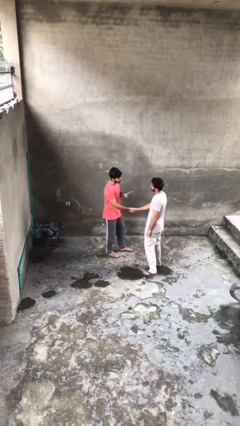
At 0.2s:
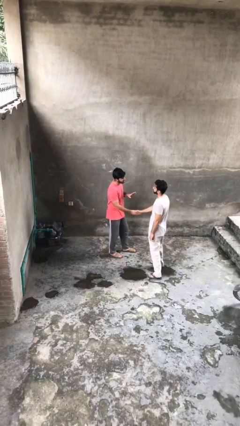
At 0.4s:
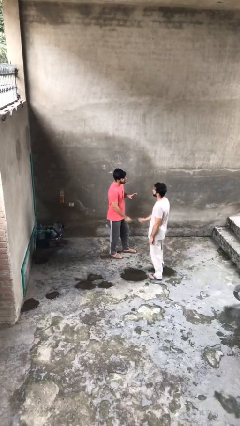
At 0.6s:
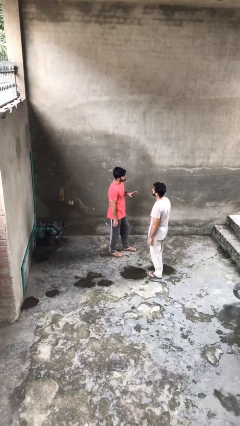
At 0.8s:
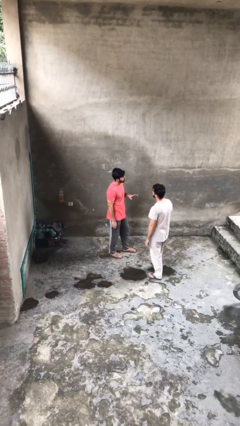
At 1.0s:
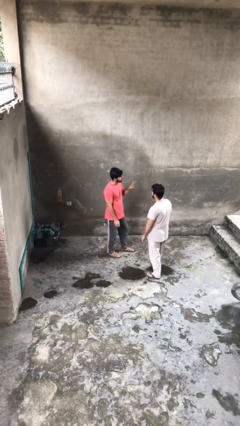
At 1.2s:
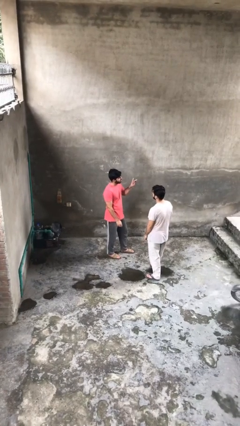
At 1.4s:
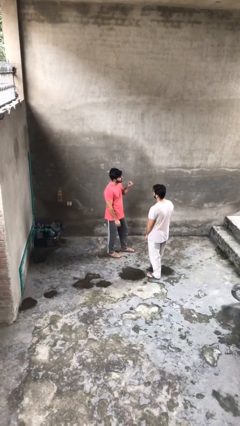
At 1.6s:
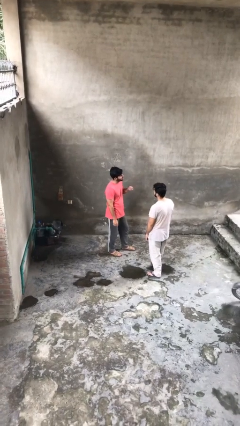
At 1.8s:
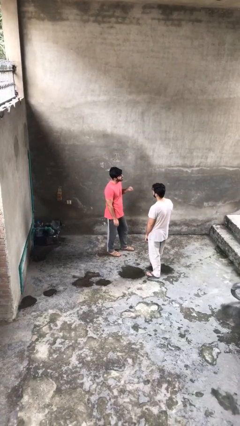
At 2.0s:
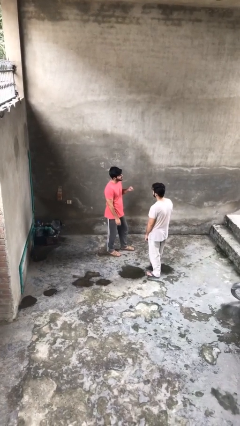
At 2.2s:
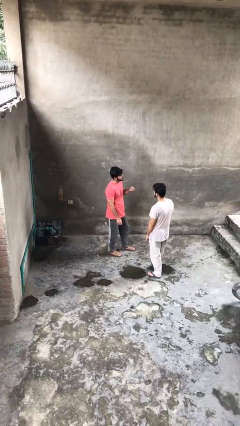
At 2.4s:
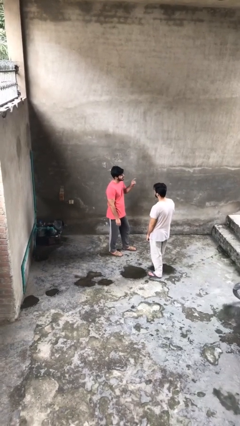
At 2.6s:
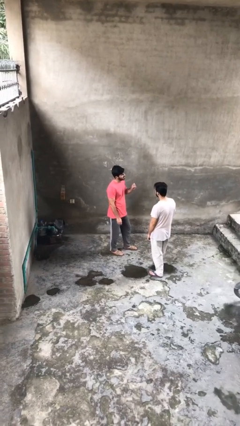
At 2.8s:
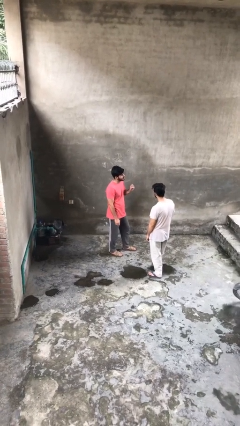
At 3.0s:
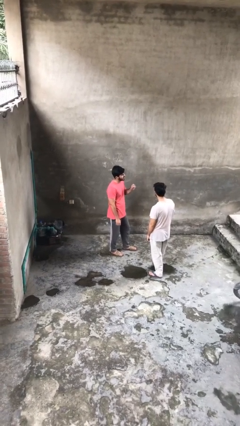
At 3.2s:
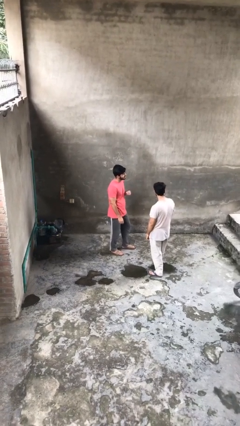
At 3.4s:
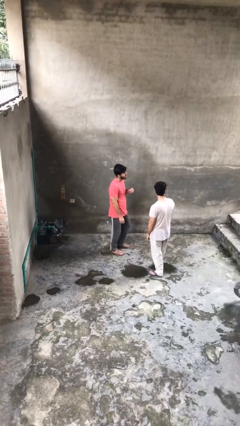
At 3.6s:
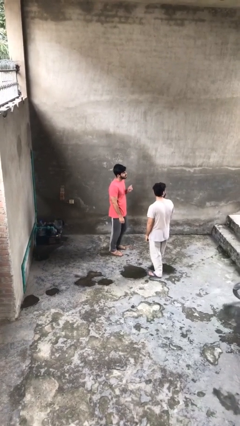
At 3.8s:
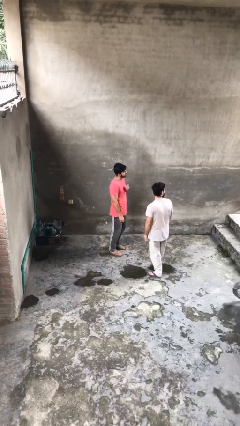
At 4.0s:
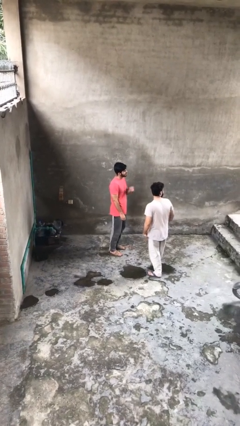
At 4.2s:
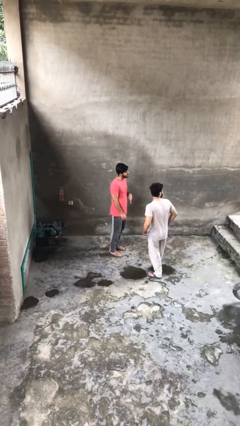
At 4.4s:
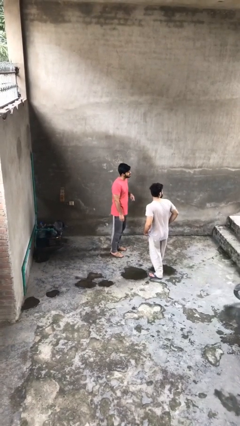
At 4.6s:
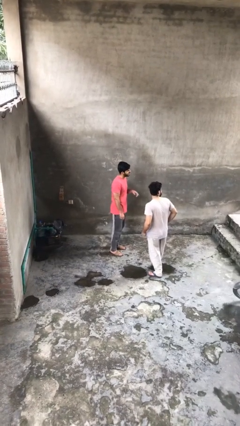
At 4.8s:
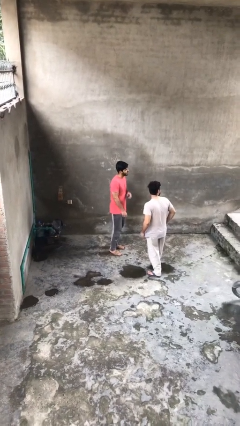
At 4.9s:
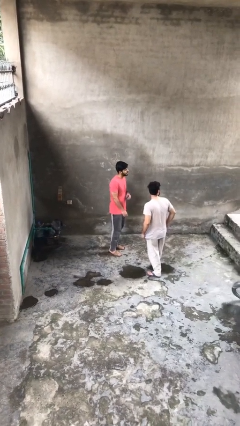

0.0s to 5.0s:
person talks to person

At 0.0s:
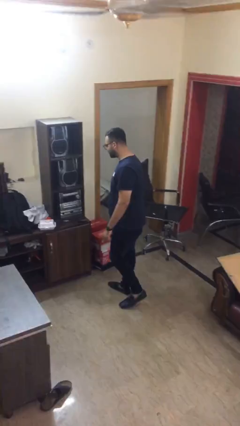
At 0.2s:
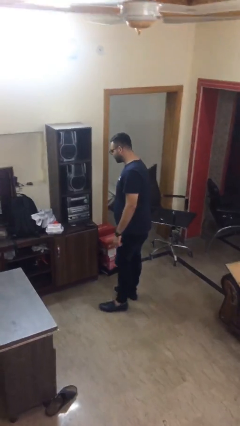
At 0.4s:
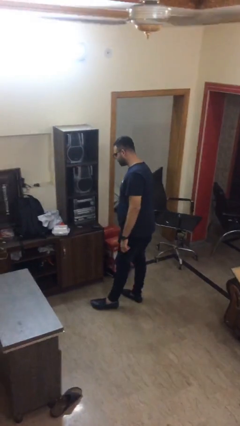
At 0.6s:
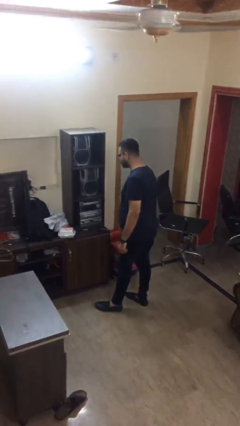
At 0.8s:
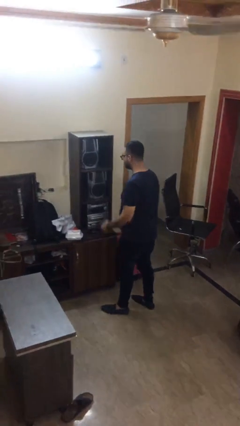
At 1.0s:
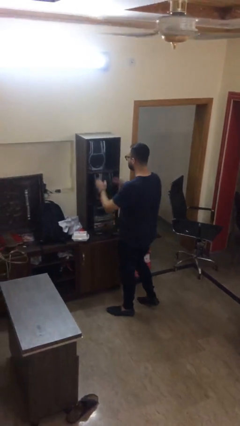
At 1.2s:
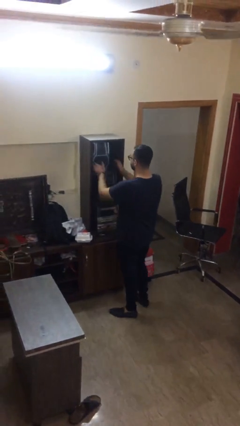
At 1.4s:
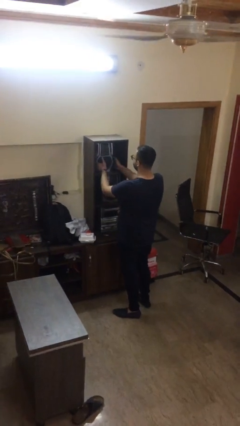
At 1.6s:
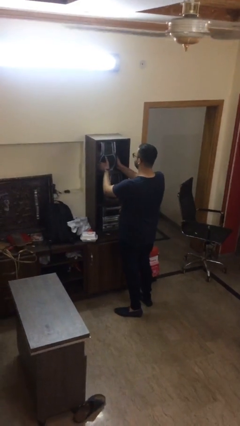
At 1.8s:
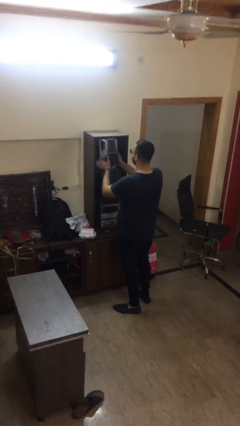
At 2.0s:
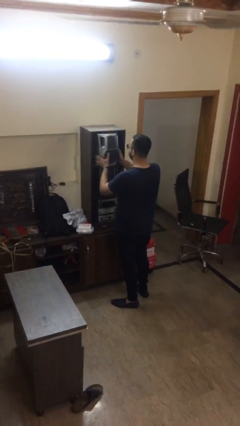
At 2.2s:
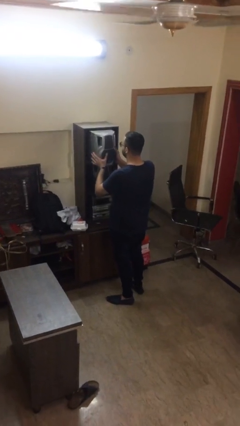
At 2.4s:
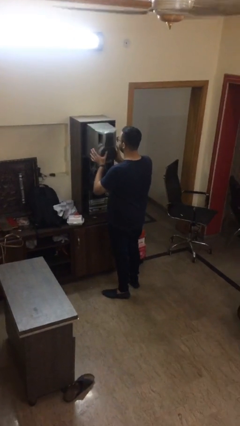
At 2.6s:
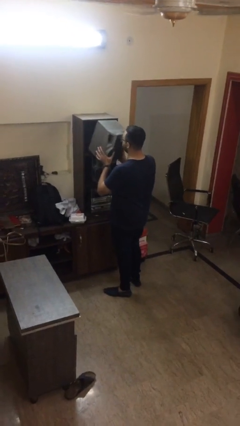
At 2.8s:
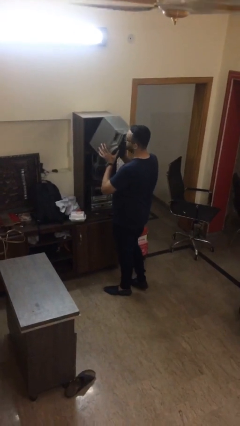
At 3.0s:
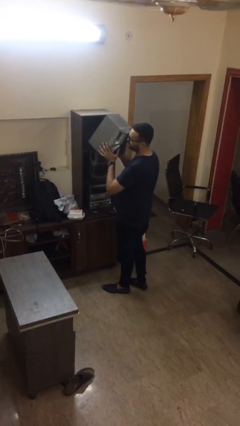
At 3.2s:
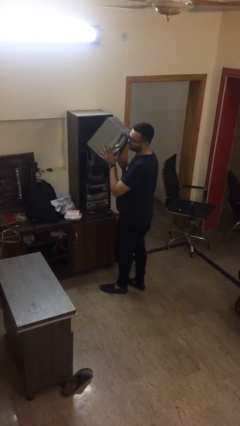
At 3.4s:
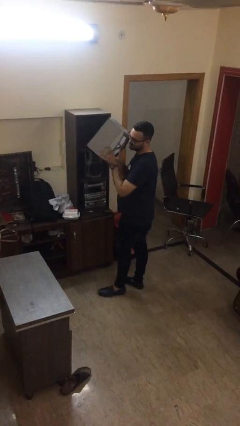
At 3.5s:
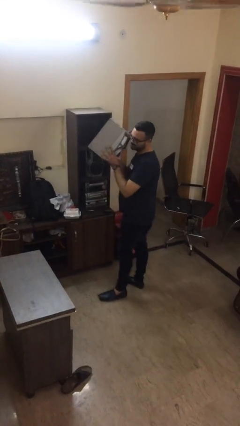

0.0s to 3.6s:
person picks up object from shelf

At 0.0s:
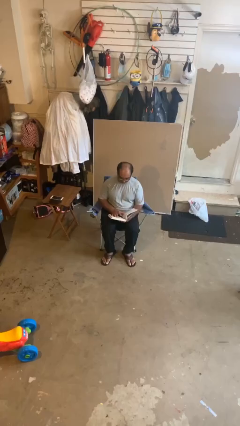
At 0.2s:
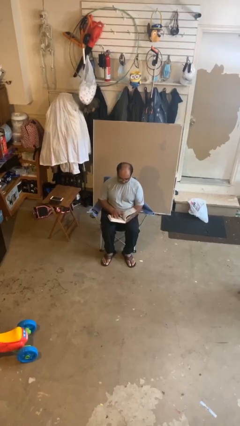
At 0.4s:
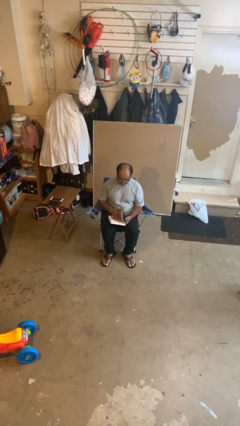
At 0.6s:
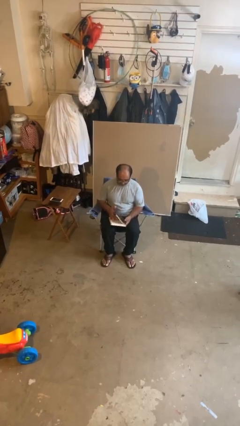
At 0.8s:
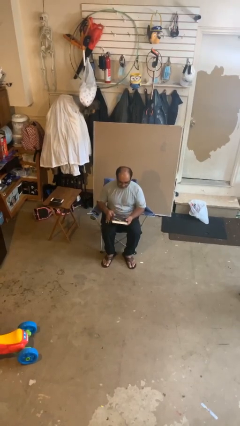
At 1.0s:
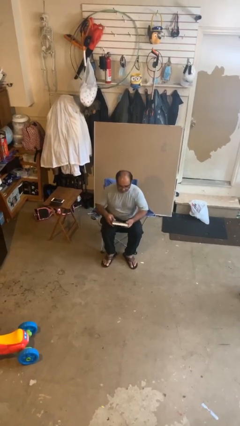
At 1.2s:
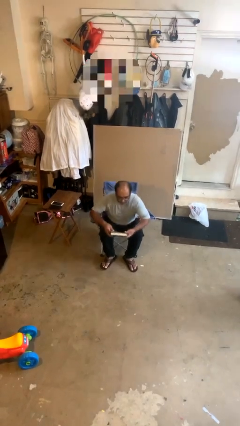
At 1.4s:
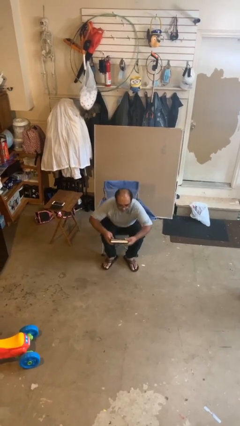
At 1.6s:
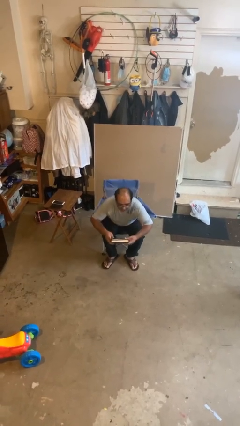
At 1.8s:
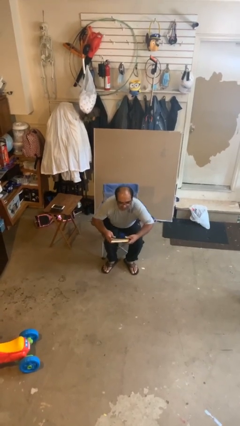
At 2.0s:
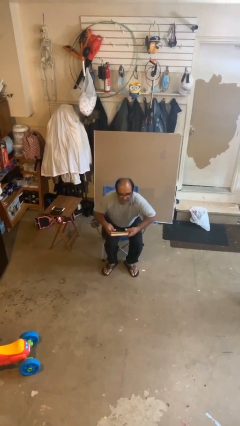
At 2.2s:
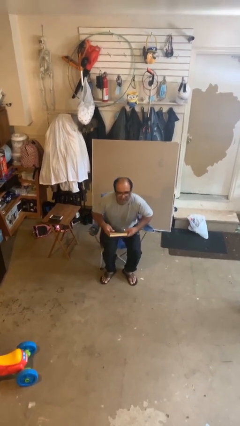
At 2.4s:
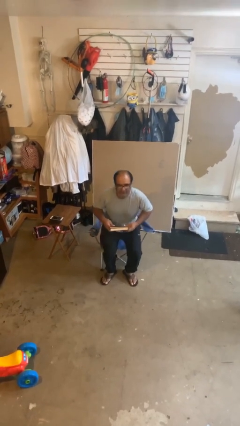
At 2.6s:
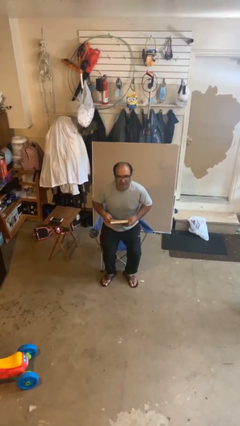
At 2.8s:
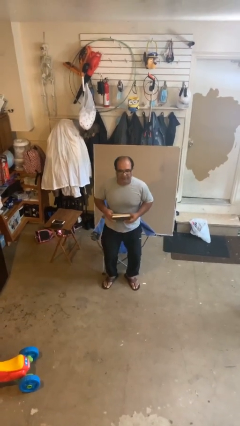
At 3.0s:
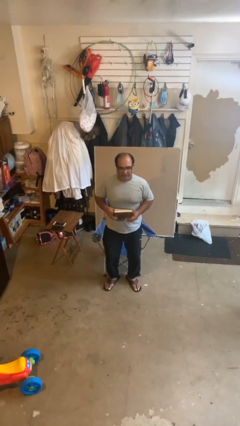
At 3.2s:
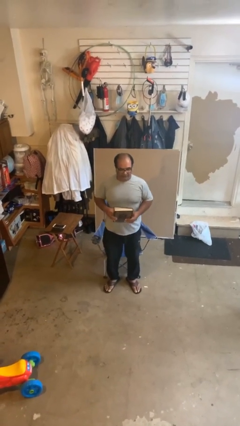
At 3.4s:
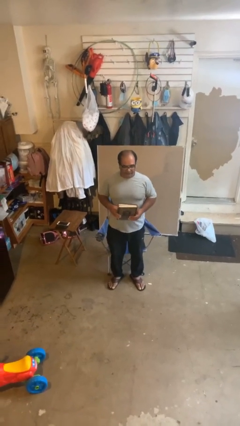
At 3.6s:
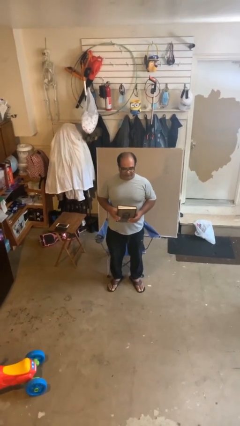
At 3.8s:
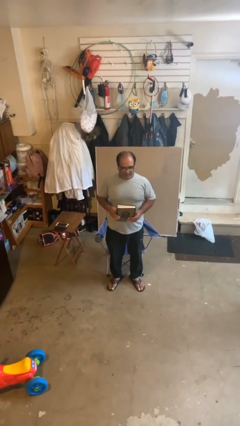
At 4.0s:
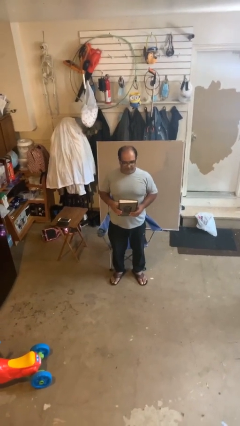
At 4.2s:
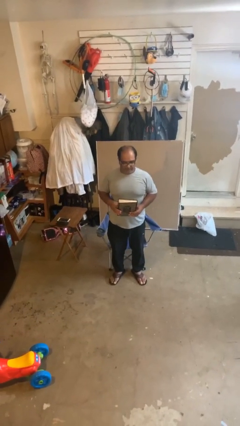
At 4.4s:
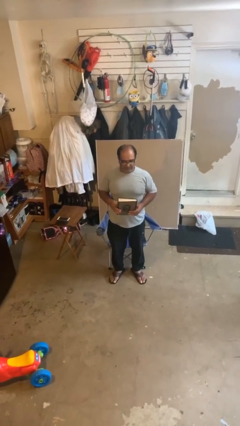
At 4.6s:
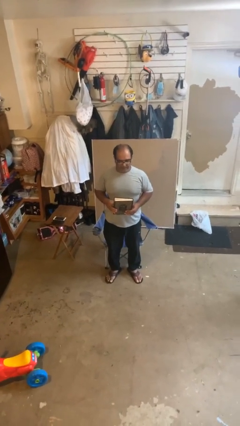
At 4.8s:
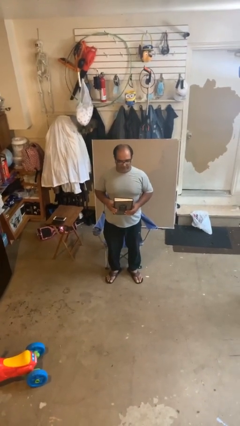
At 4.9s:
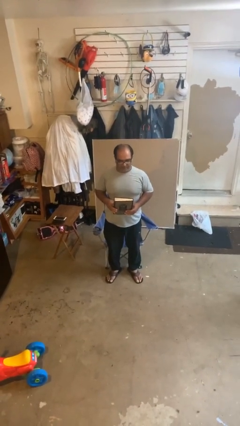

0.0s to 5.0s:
person stands up

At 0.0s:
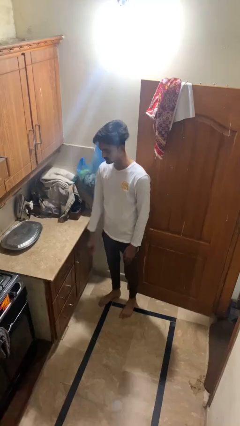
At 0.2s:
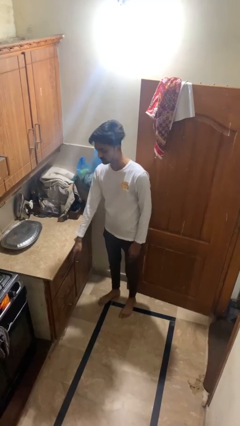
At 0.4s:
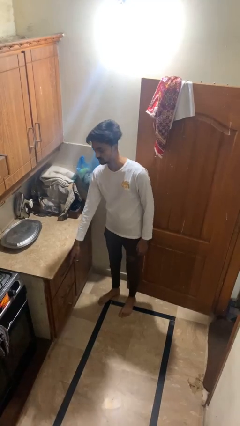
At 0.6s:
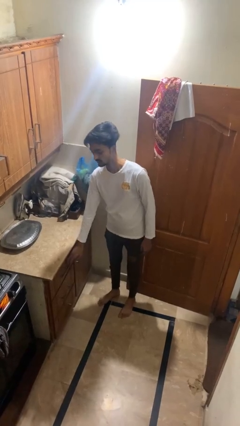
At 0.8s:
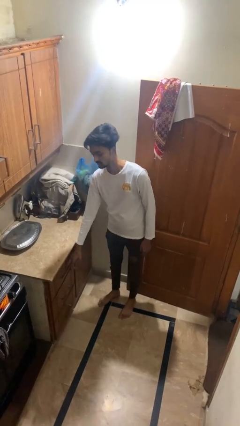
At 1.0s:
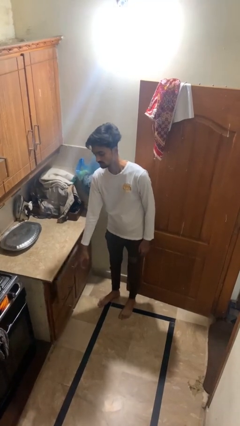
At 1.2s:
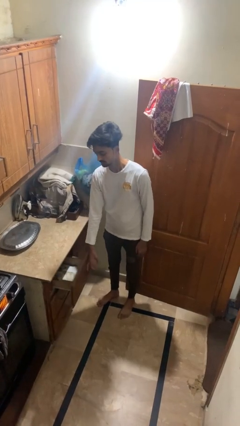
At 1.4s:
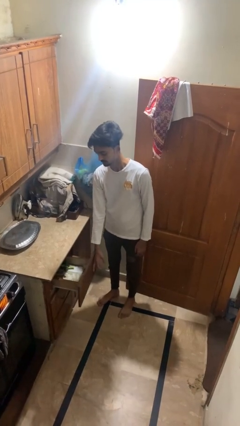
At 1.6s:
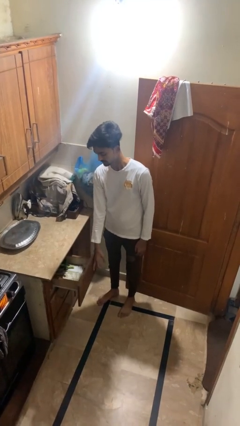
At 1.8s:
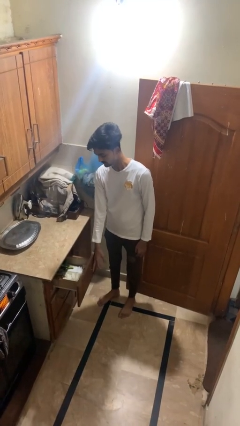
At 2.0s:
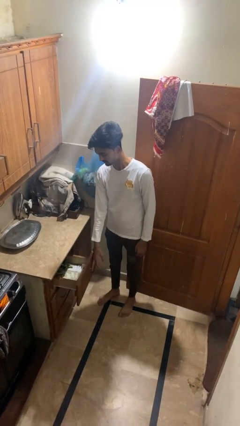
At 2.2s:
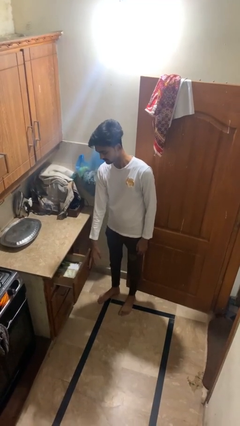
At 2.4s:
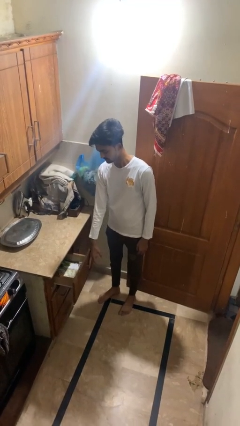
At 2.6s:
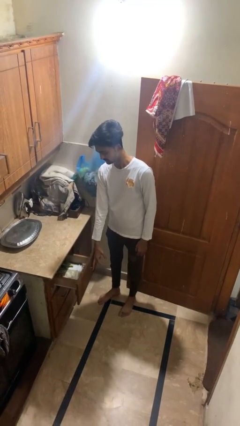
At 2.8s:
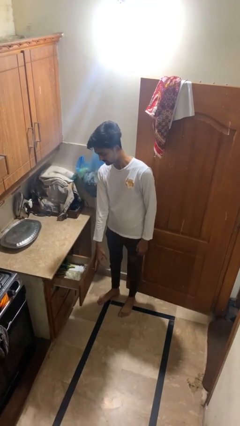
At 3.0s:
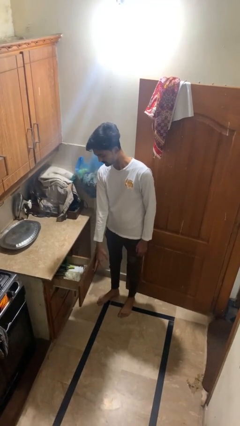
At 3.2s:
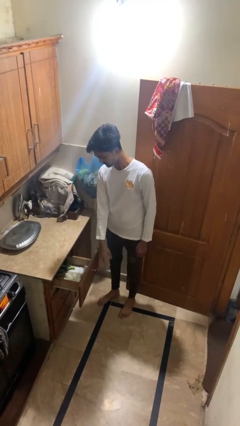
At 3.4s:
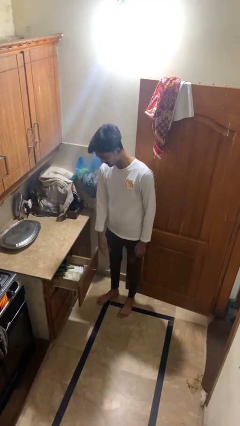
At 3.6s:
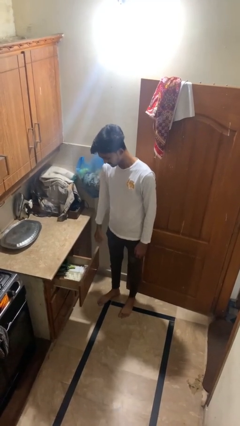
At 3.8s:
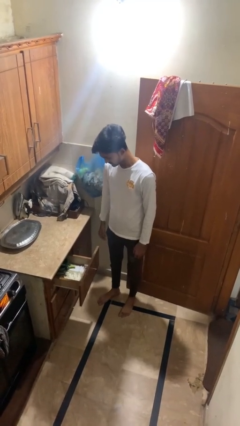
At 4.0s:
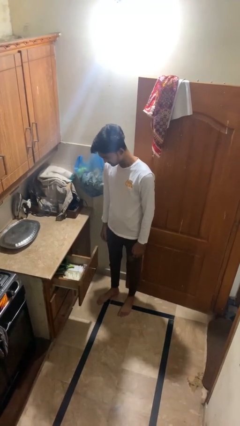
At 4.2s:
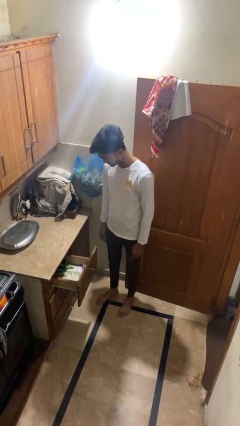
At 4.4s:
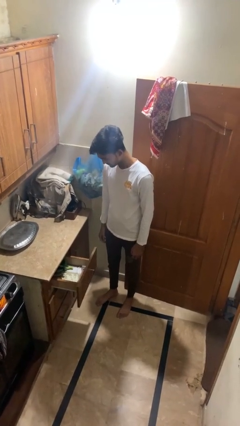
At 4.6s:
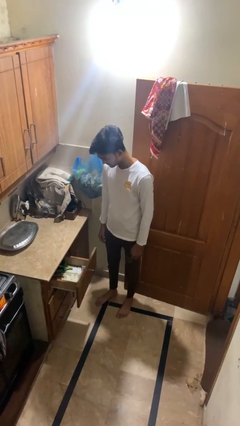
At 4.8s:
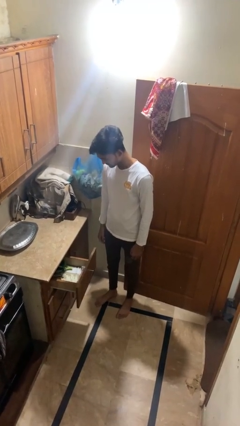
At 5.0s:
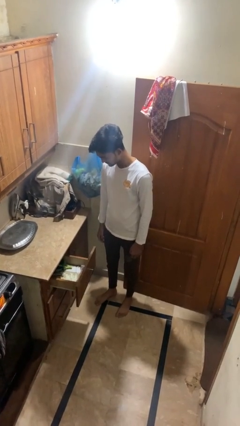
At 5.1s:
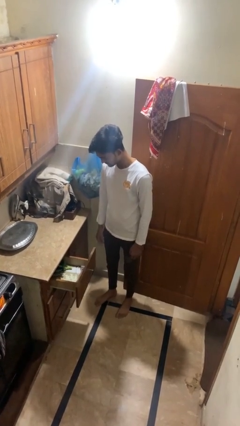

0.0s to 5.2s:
person opens kitchen drawer
